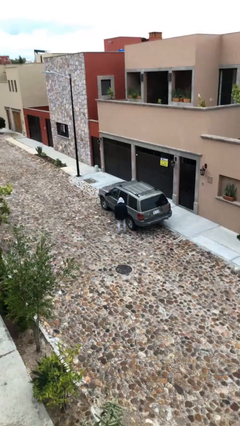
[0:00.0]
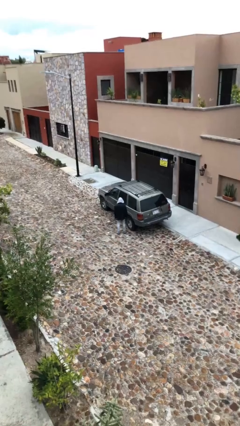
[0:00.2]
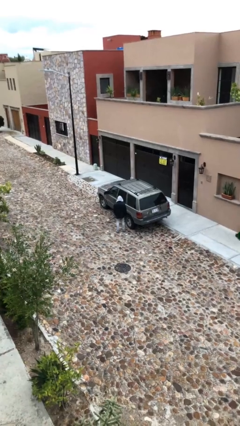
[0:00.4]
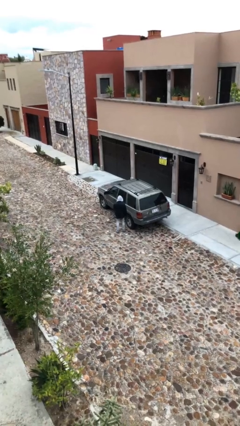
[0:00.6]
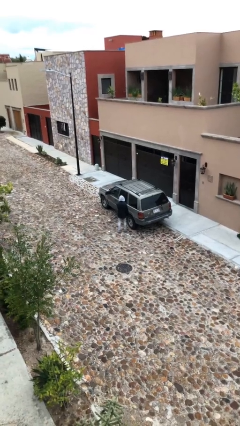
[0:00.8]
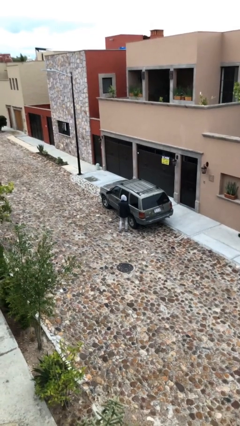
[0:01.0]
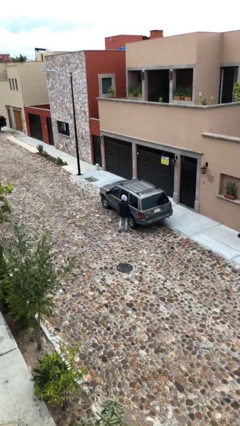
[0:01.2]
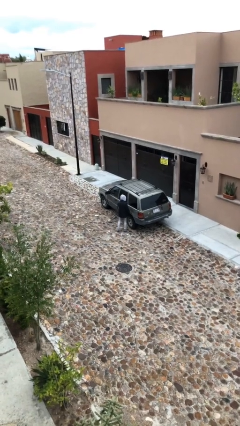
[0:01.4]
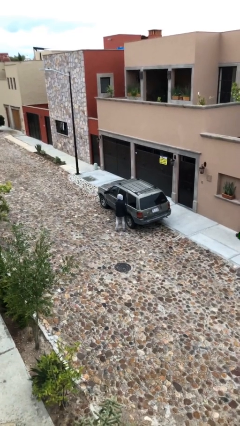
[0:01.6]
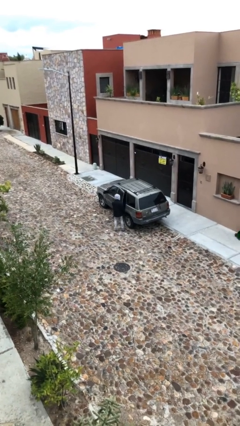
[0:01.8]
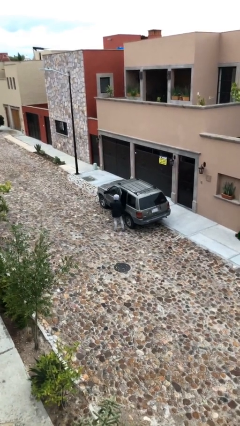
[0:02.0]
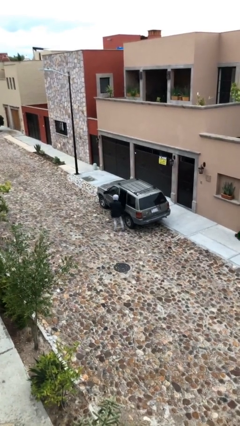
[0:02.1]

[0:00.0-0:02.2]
person opens car door

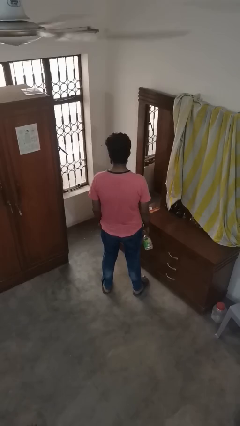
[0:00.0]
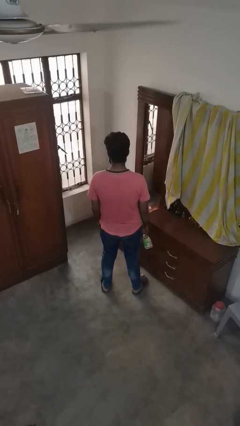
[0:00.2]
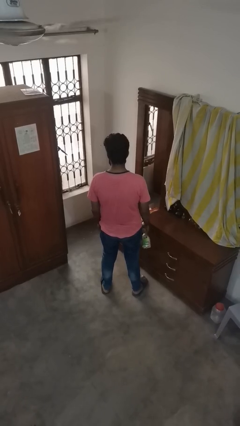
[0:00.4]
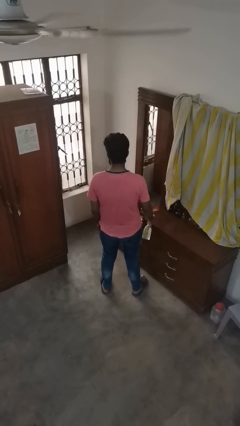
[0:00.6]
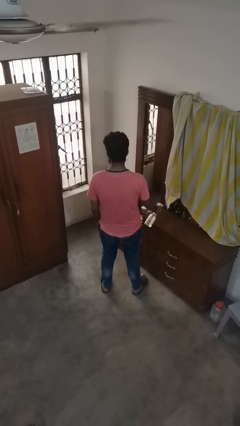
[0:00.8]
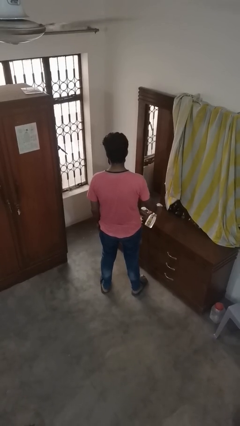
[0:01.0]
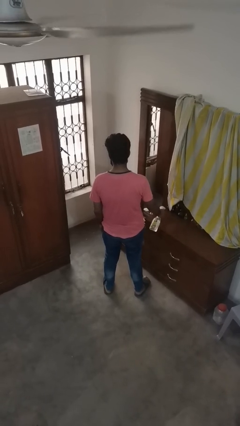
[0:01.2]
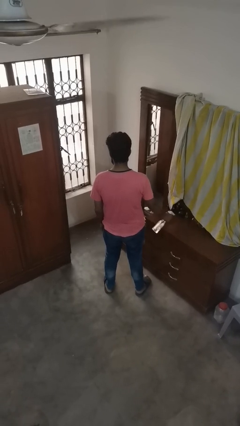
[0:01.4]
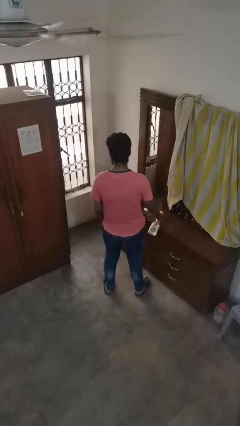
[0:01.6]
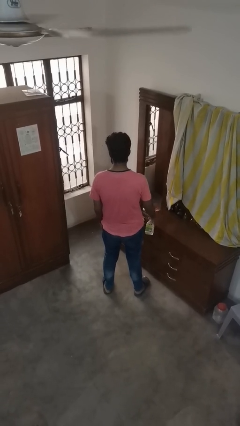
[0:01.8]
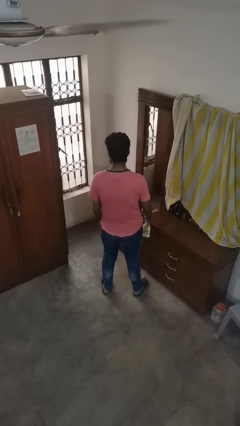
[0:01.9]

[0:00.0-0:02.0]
person sprays from bottle

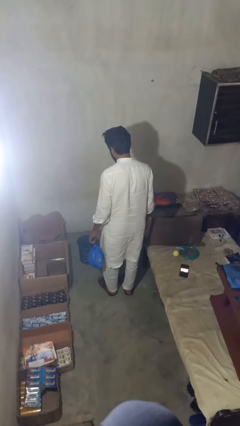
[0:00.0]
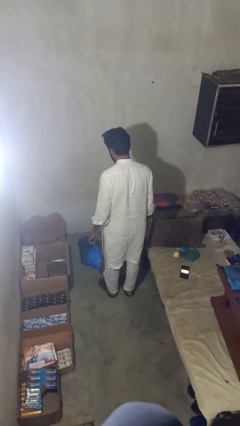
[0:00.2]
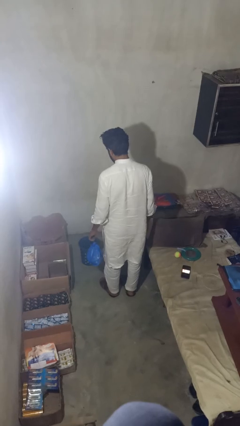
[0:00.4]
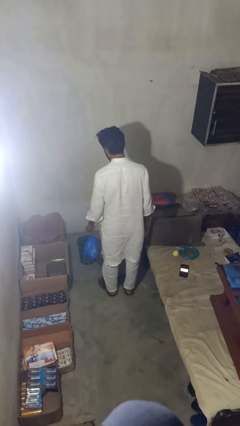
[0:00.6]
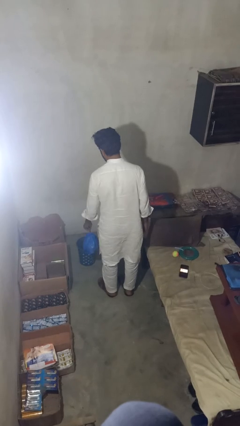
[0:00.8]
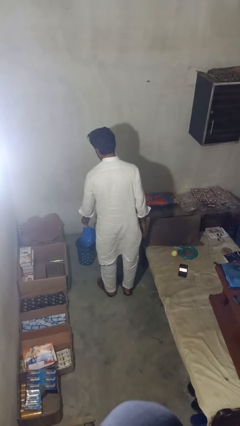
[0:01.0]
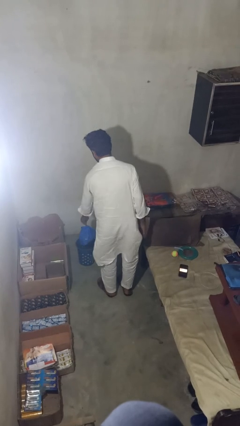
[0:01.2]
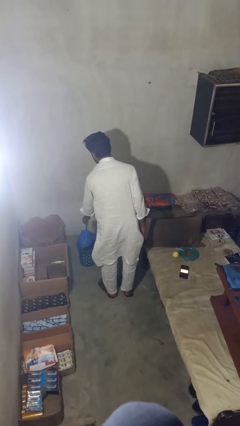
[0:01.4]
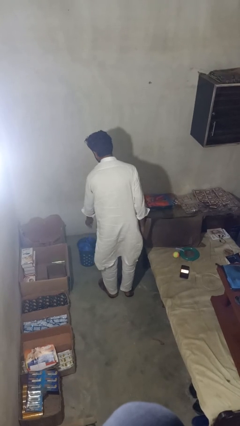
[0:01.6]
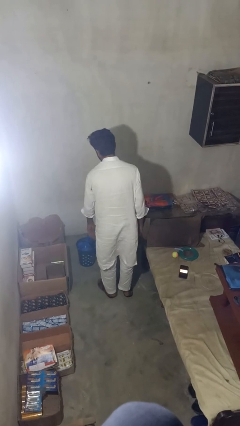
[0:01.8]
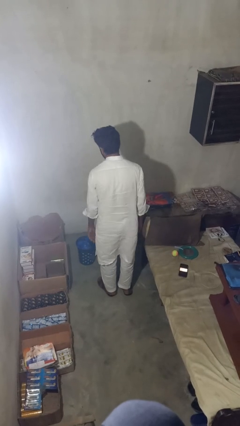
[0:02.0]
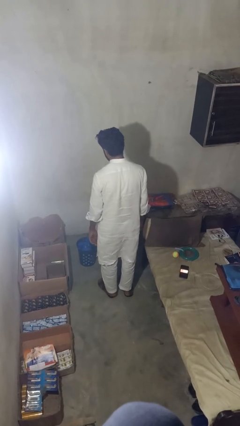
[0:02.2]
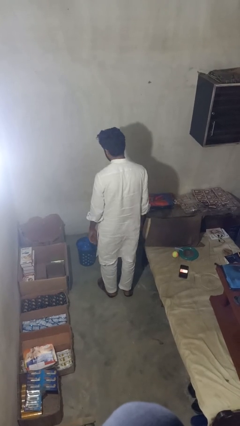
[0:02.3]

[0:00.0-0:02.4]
person puts object into basket

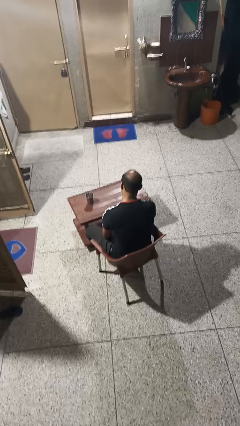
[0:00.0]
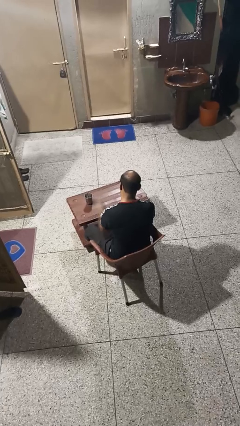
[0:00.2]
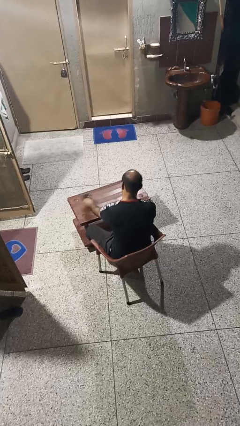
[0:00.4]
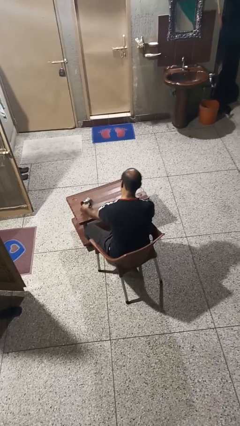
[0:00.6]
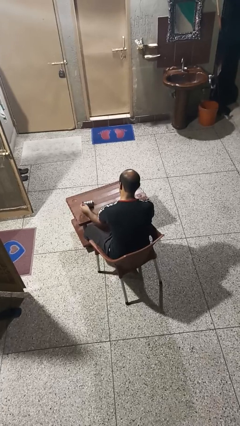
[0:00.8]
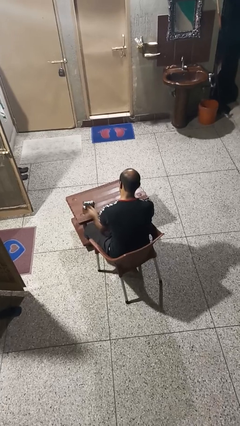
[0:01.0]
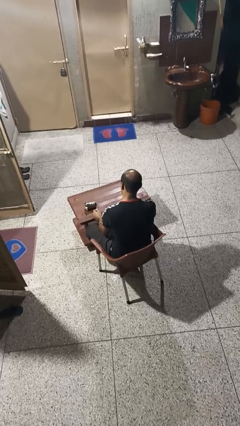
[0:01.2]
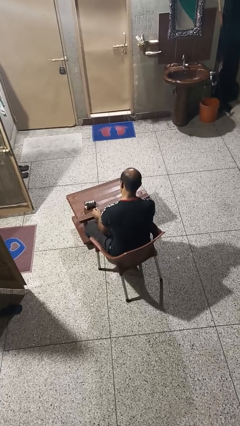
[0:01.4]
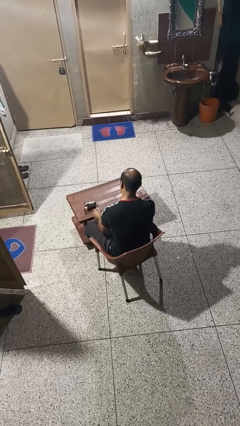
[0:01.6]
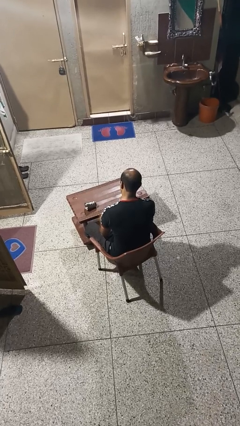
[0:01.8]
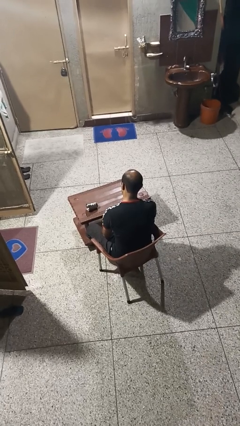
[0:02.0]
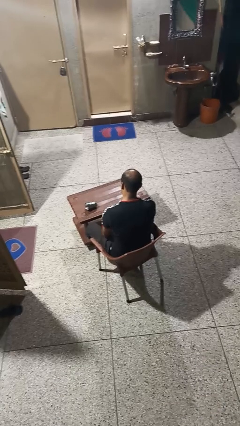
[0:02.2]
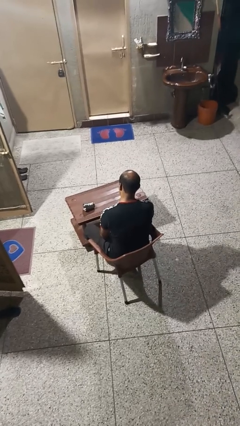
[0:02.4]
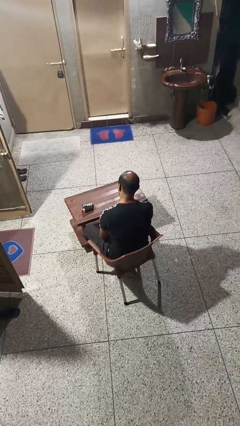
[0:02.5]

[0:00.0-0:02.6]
person knocks over glass

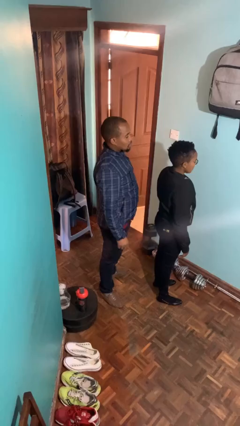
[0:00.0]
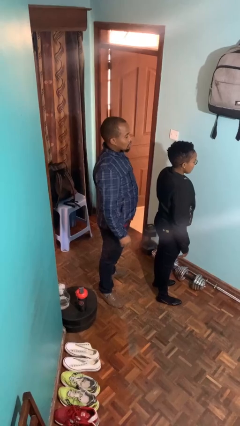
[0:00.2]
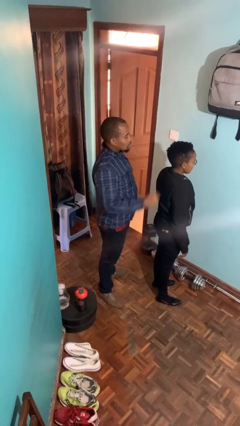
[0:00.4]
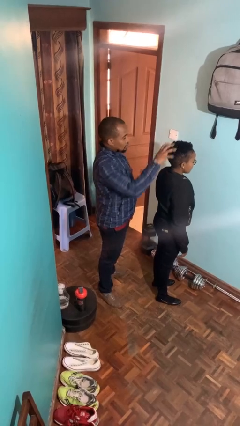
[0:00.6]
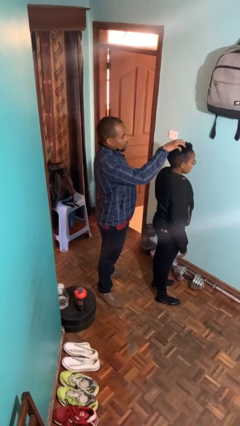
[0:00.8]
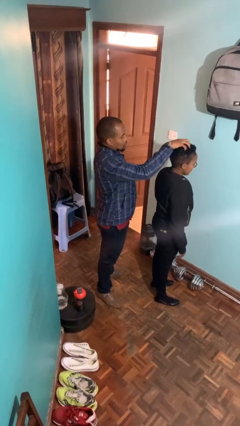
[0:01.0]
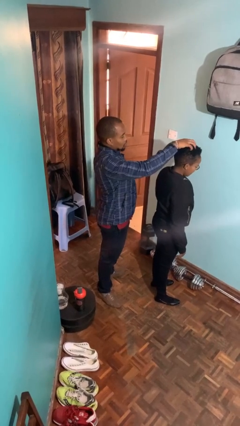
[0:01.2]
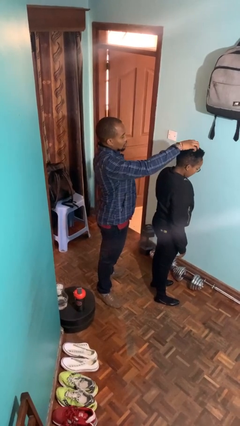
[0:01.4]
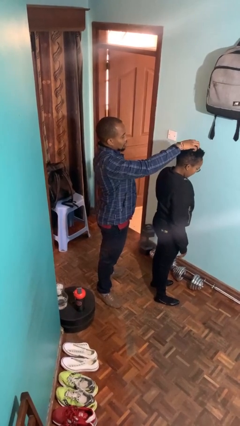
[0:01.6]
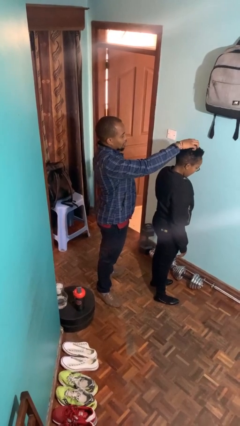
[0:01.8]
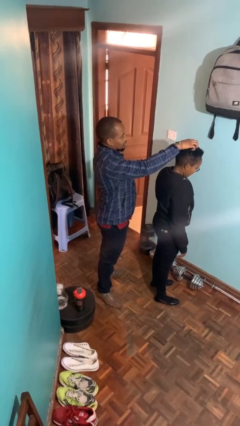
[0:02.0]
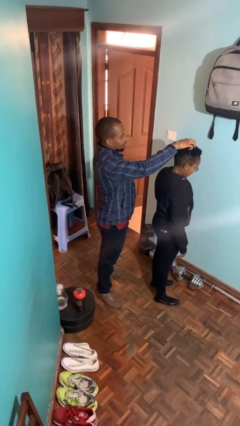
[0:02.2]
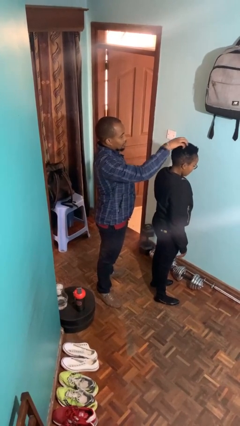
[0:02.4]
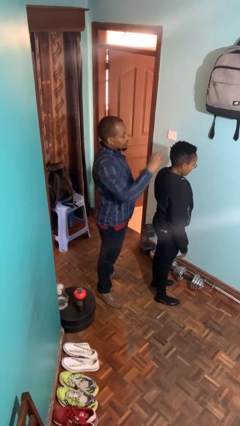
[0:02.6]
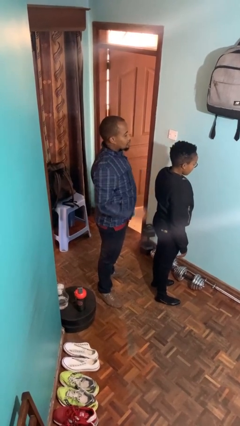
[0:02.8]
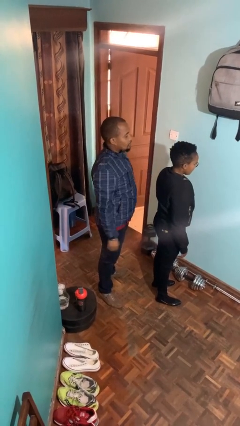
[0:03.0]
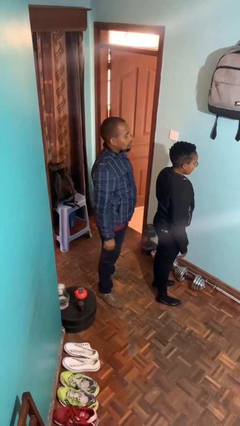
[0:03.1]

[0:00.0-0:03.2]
person grabs person by hair

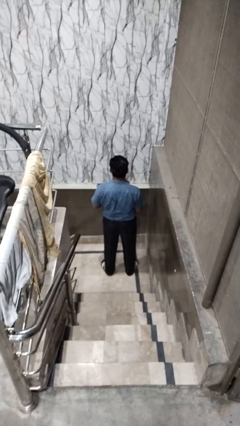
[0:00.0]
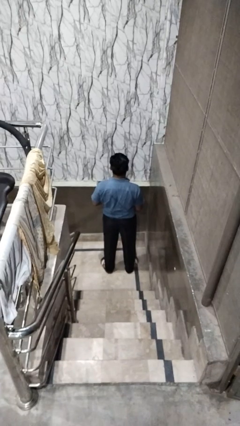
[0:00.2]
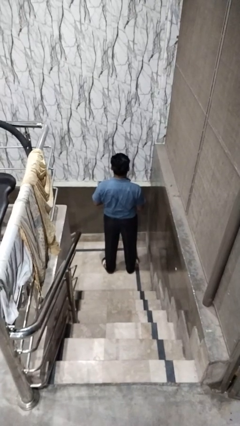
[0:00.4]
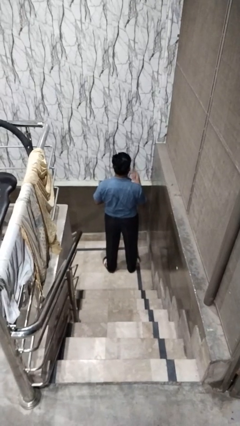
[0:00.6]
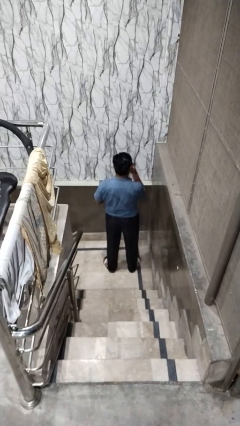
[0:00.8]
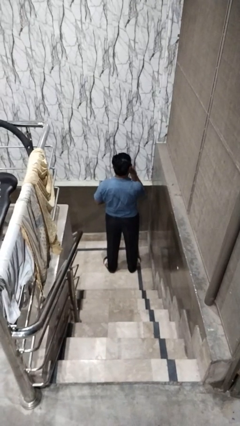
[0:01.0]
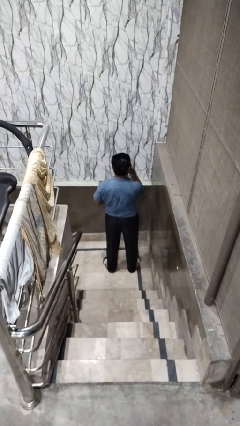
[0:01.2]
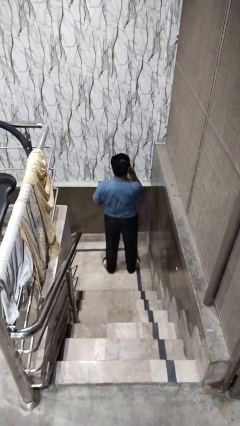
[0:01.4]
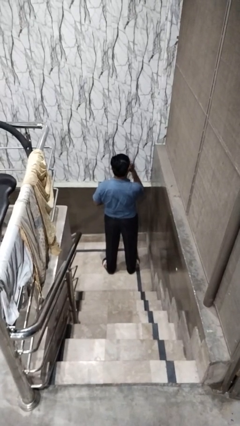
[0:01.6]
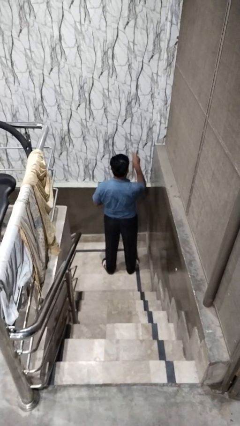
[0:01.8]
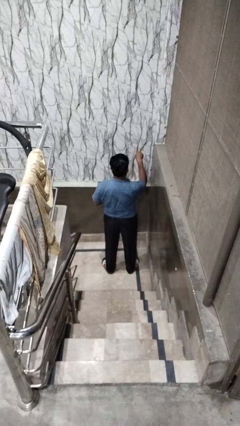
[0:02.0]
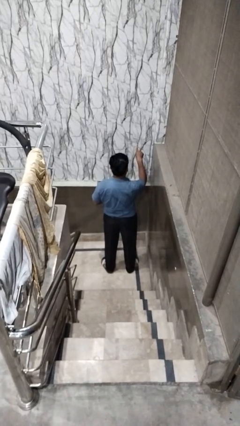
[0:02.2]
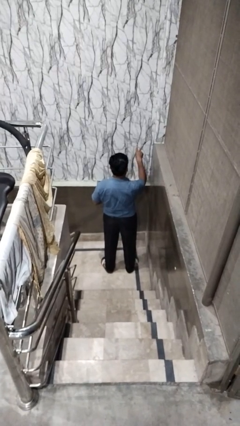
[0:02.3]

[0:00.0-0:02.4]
person gestures watch closely

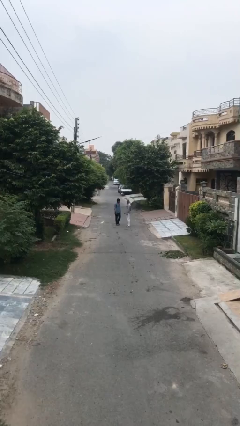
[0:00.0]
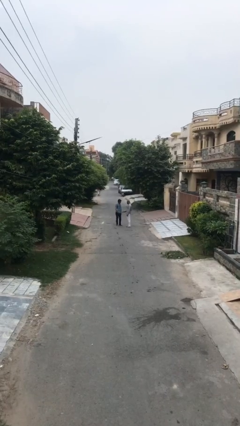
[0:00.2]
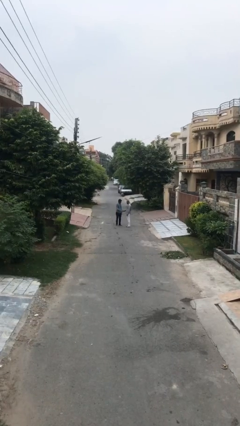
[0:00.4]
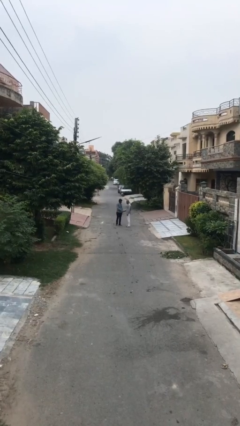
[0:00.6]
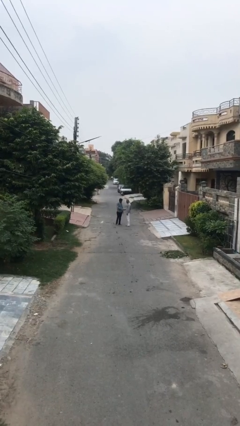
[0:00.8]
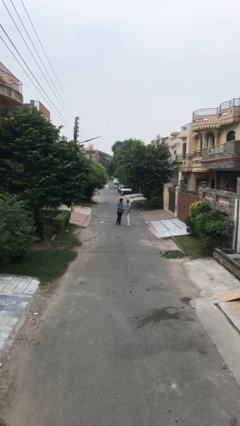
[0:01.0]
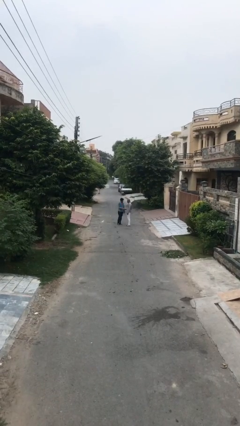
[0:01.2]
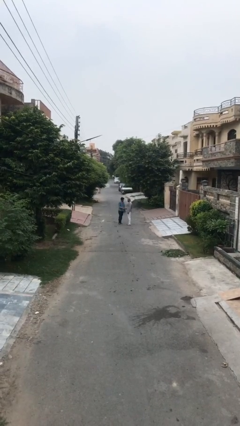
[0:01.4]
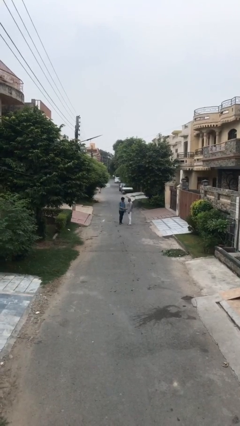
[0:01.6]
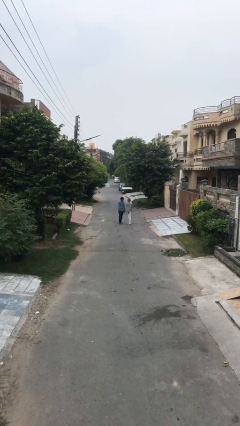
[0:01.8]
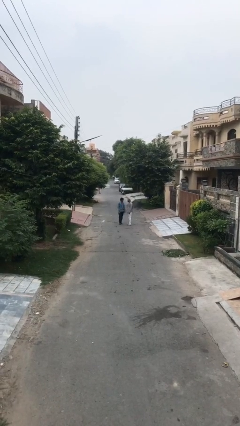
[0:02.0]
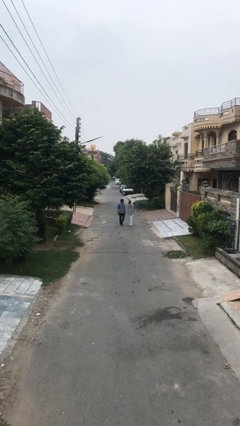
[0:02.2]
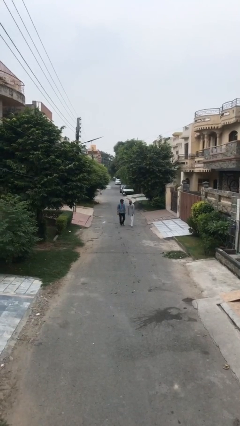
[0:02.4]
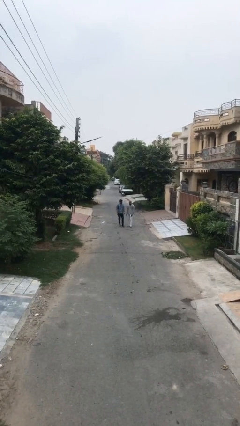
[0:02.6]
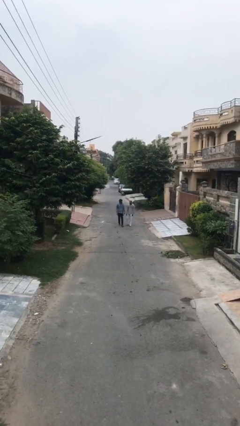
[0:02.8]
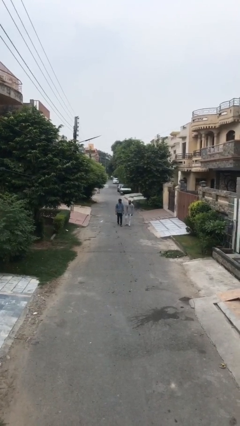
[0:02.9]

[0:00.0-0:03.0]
person shakes hand
